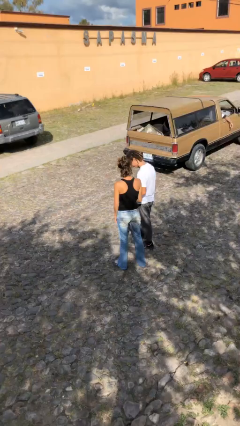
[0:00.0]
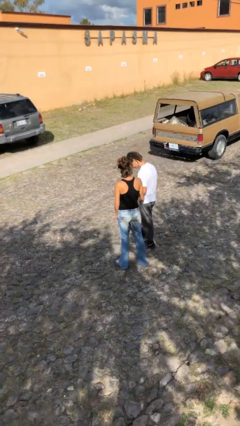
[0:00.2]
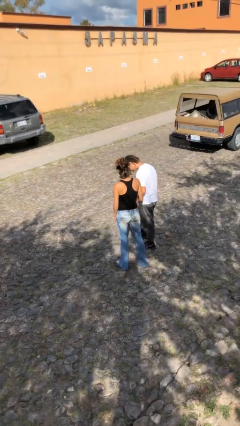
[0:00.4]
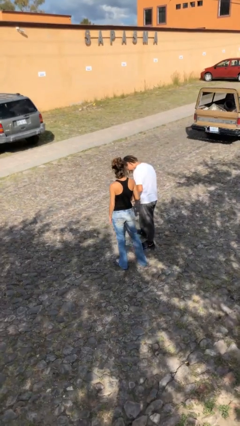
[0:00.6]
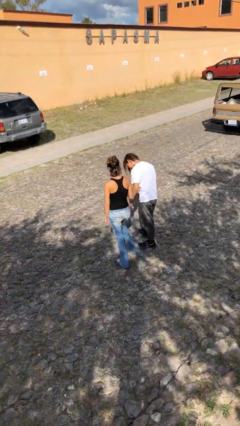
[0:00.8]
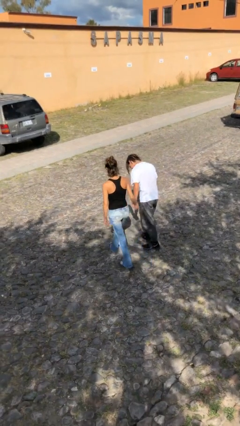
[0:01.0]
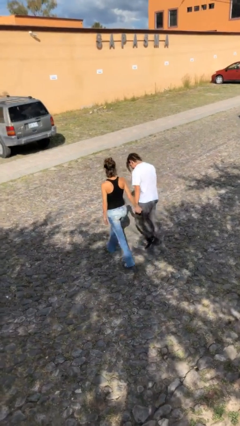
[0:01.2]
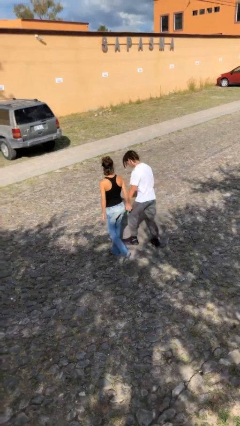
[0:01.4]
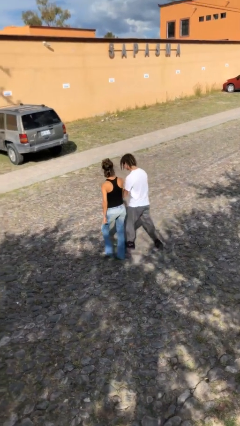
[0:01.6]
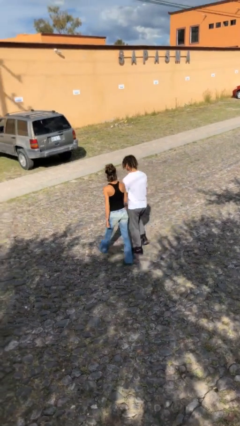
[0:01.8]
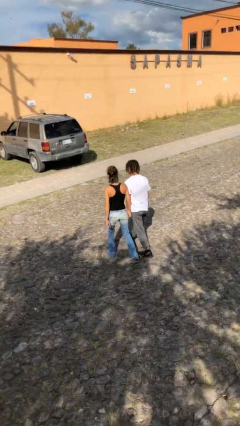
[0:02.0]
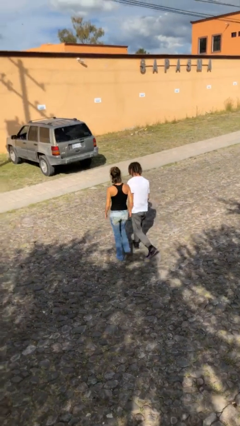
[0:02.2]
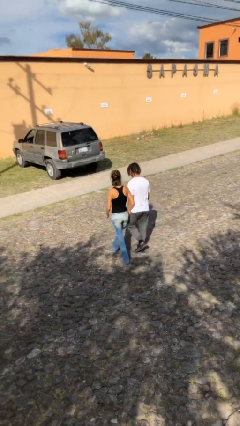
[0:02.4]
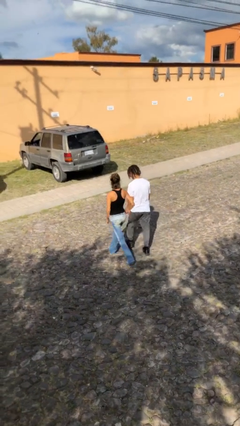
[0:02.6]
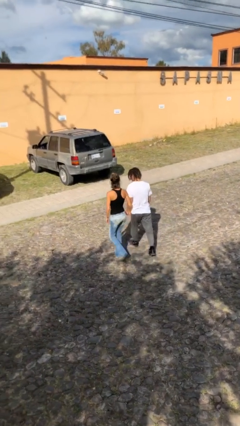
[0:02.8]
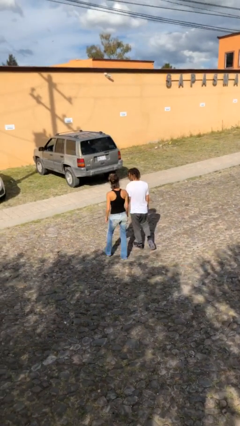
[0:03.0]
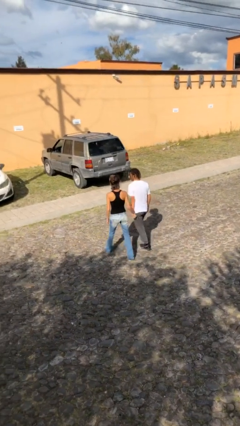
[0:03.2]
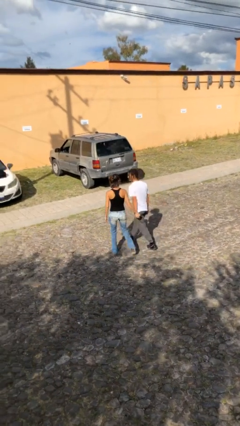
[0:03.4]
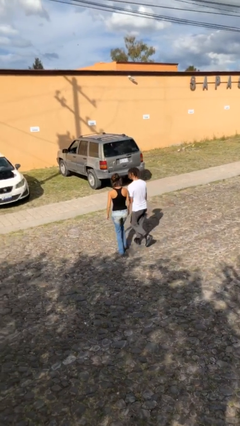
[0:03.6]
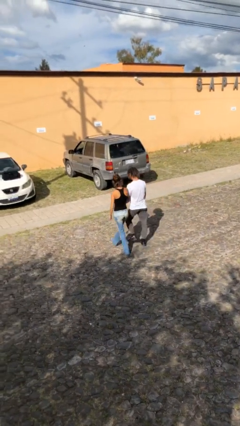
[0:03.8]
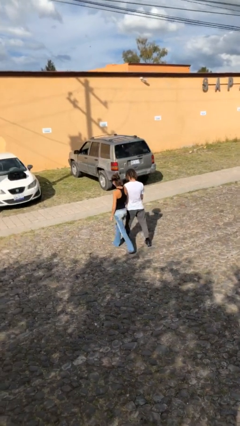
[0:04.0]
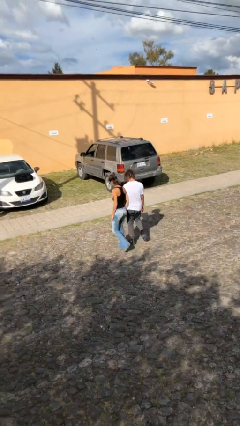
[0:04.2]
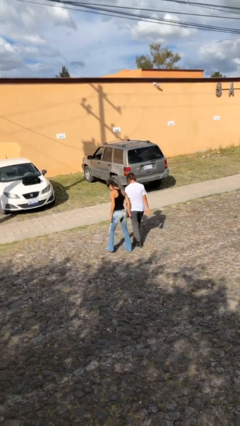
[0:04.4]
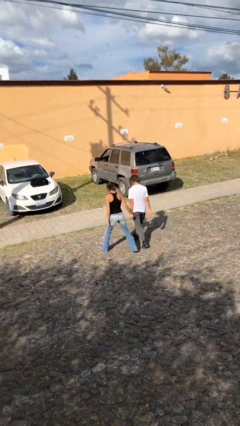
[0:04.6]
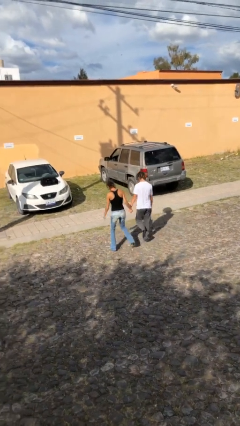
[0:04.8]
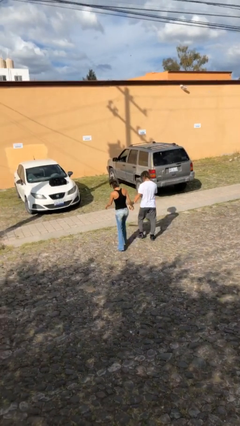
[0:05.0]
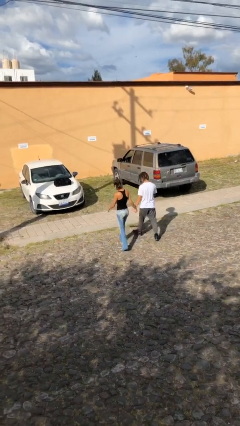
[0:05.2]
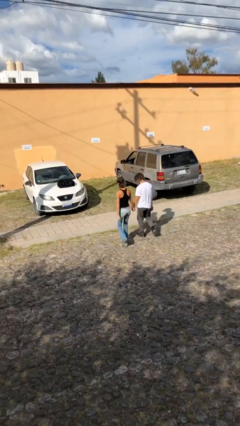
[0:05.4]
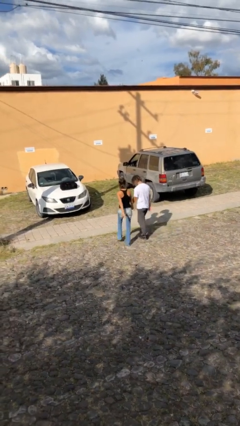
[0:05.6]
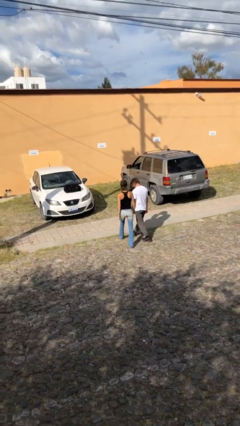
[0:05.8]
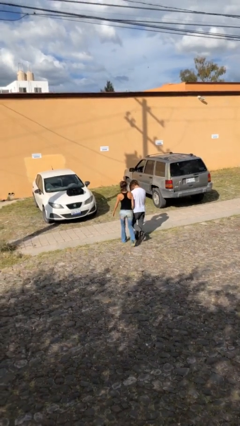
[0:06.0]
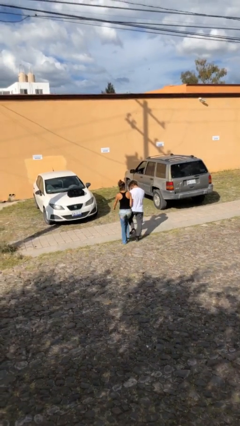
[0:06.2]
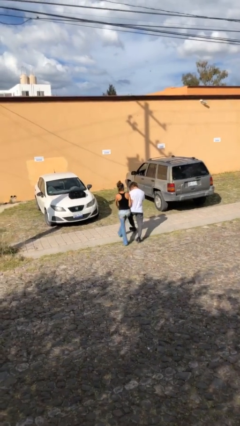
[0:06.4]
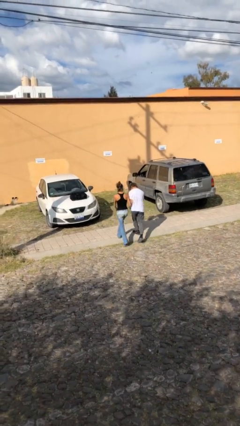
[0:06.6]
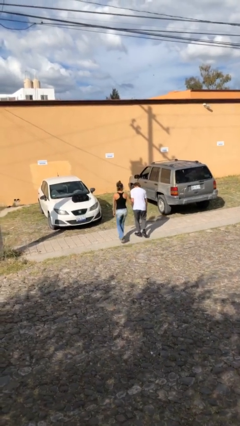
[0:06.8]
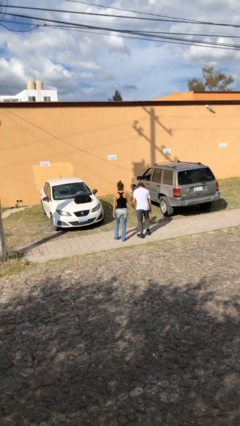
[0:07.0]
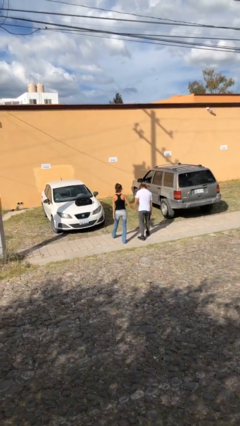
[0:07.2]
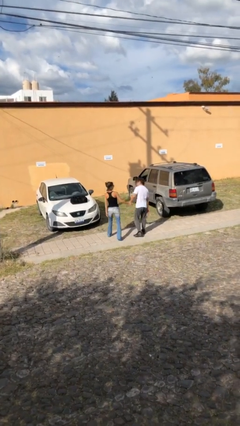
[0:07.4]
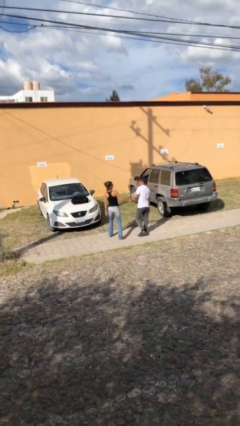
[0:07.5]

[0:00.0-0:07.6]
person holds hand

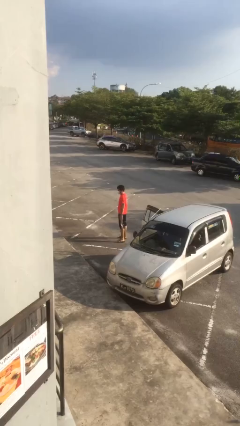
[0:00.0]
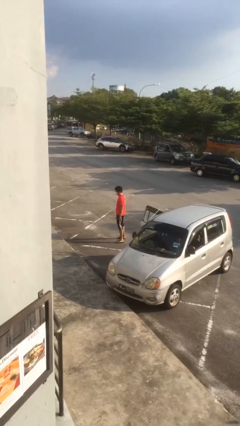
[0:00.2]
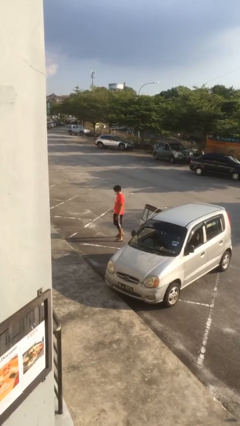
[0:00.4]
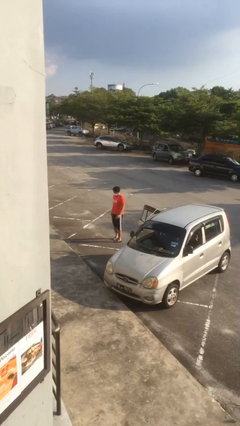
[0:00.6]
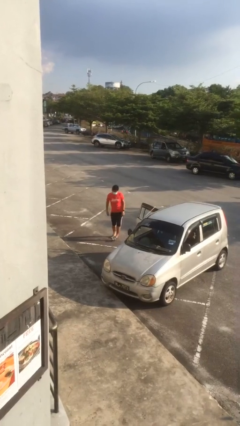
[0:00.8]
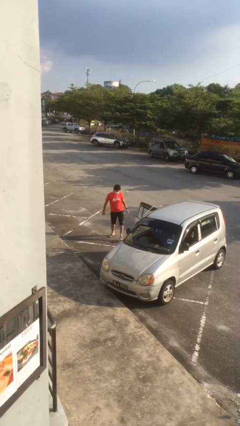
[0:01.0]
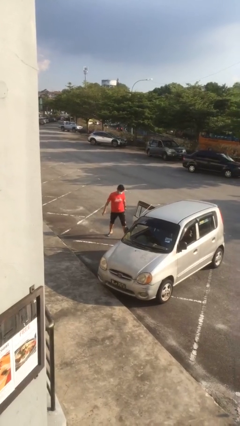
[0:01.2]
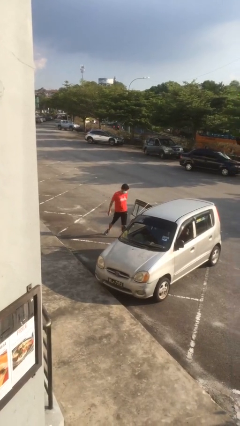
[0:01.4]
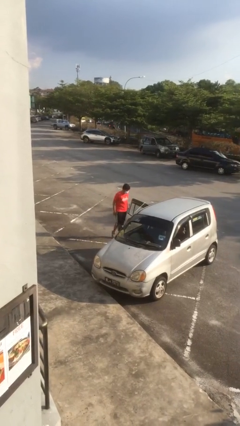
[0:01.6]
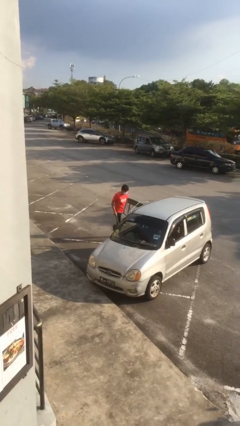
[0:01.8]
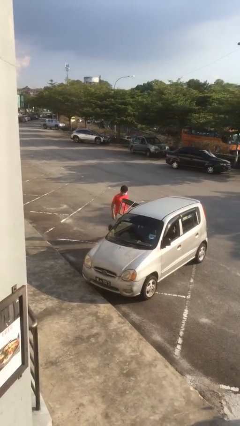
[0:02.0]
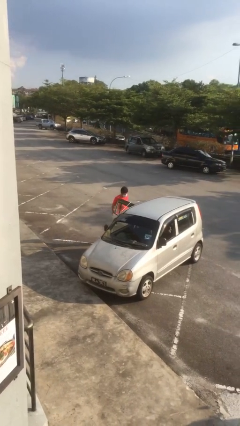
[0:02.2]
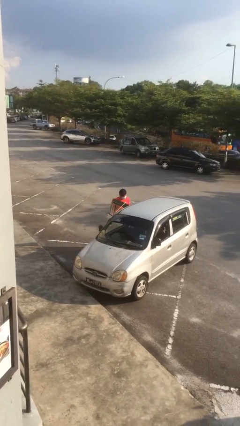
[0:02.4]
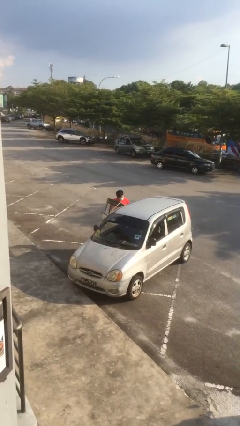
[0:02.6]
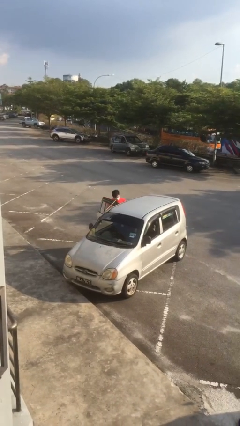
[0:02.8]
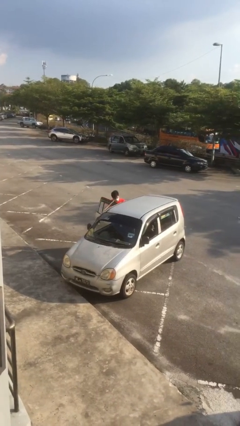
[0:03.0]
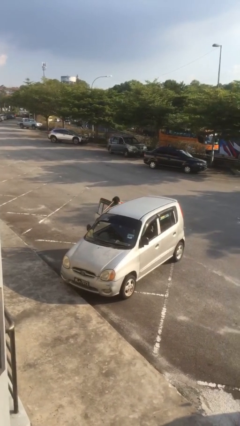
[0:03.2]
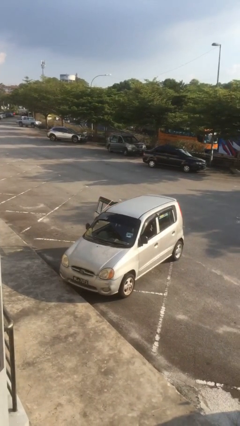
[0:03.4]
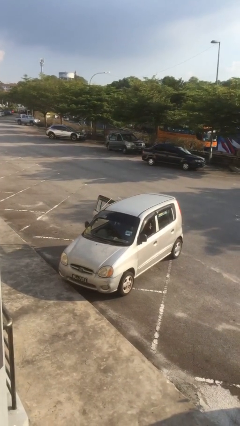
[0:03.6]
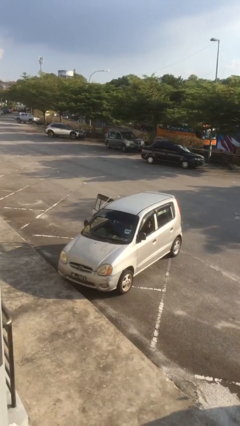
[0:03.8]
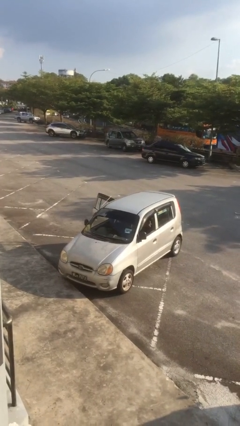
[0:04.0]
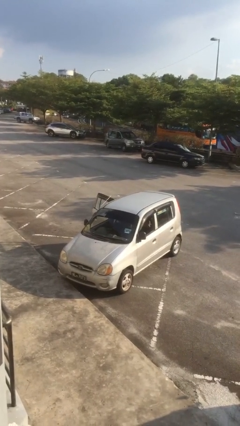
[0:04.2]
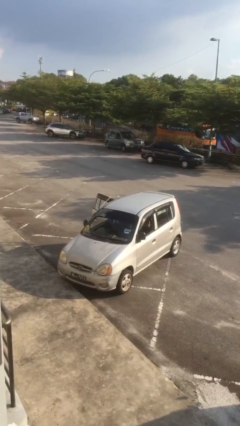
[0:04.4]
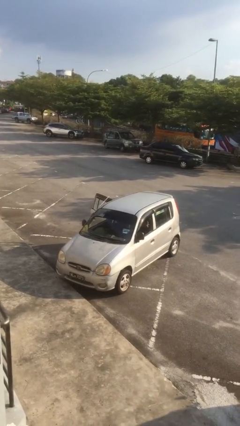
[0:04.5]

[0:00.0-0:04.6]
person enters car

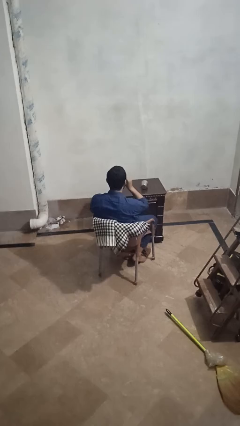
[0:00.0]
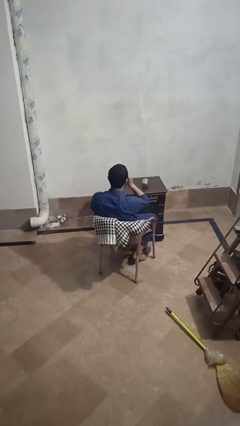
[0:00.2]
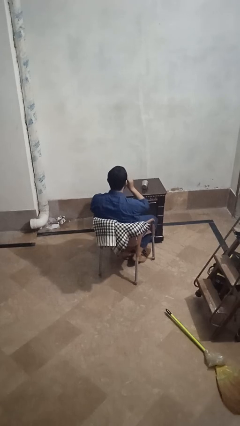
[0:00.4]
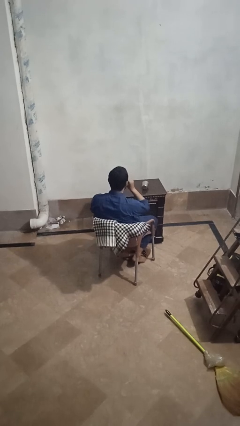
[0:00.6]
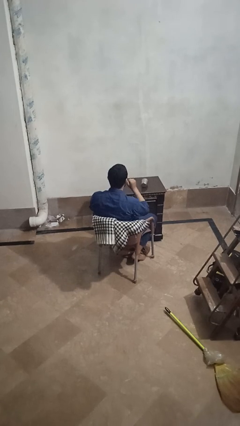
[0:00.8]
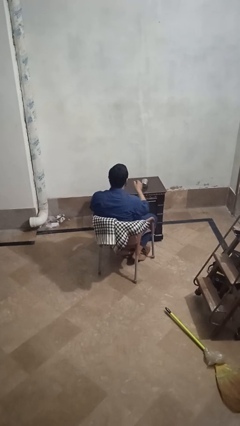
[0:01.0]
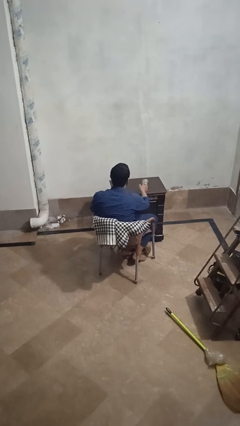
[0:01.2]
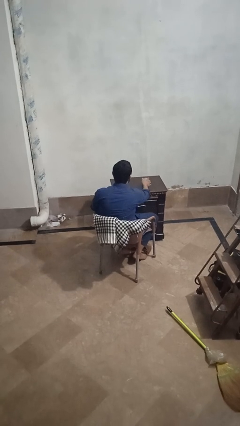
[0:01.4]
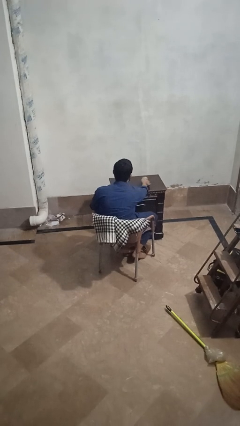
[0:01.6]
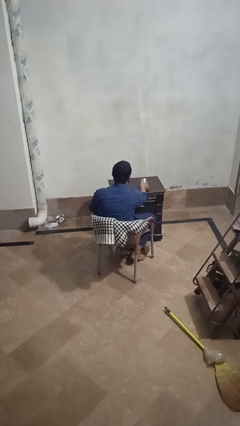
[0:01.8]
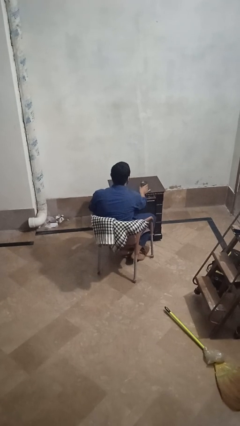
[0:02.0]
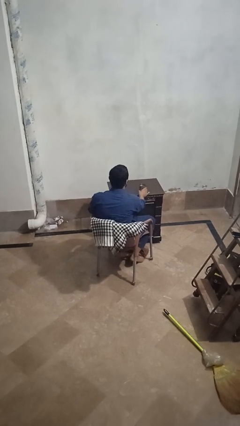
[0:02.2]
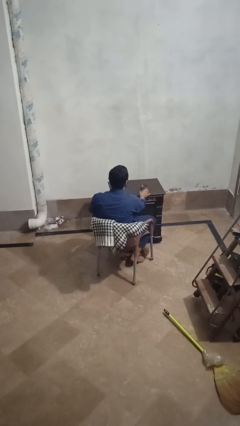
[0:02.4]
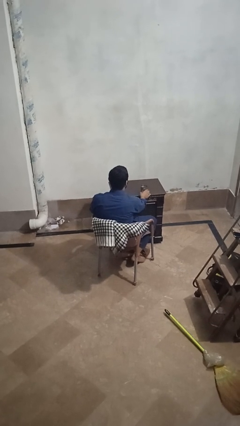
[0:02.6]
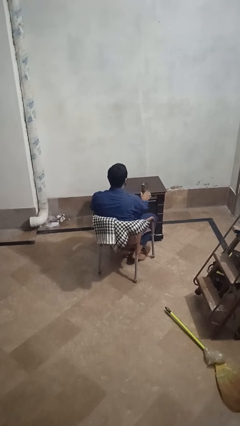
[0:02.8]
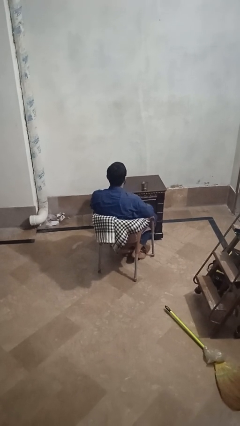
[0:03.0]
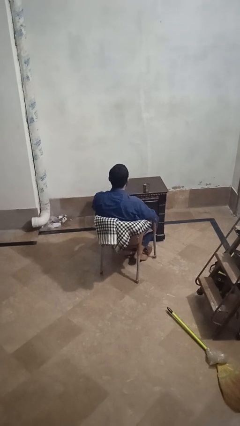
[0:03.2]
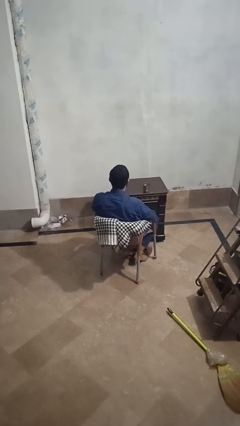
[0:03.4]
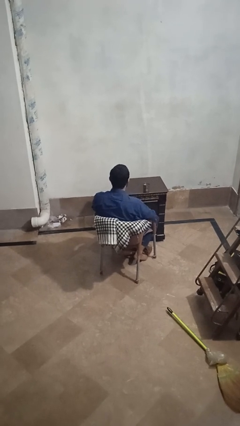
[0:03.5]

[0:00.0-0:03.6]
person sets upright glass

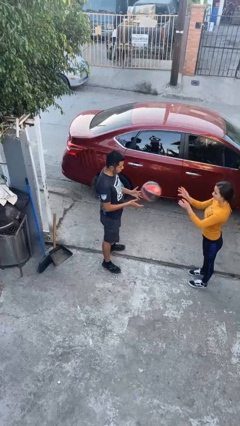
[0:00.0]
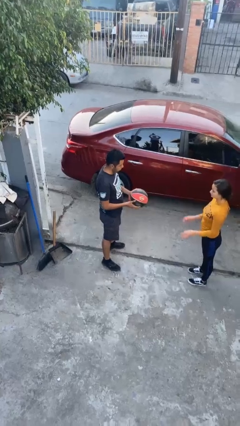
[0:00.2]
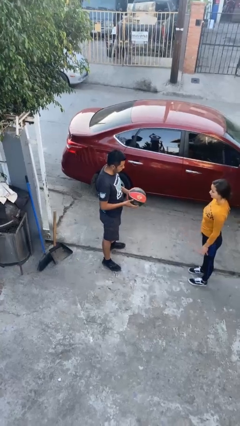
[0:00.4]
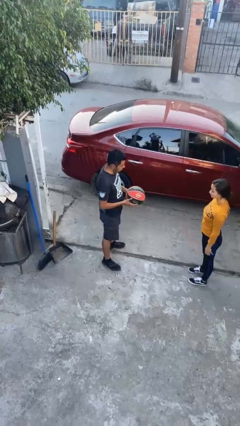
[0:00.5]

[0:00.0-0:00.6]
person catches object from person

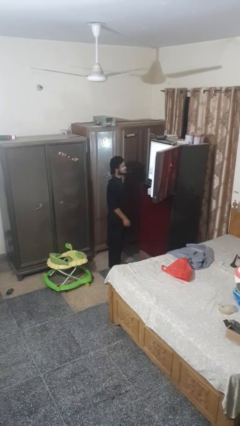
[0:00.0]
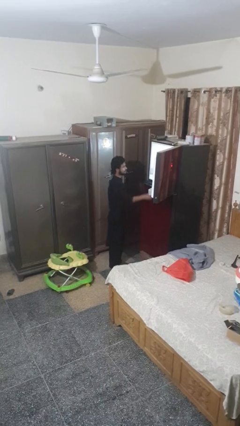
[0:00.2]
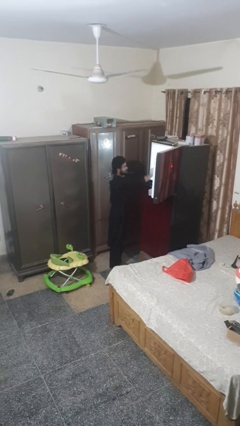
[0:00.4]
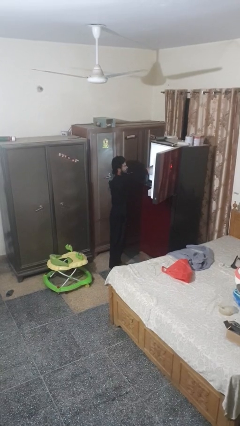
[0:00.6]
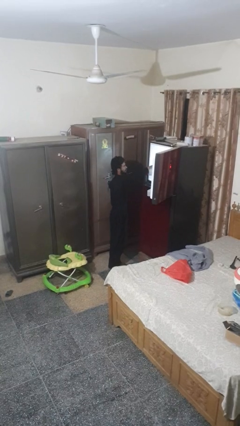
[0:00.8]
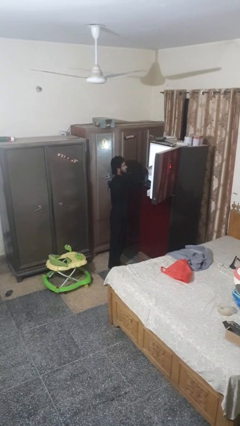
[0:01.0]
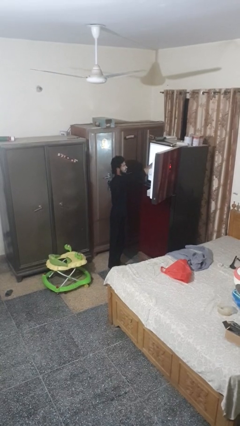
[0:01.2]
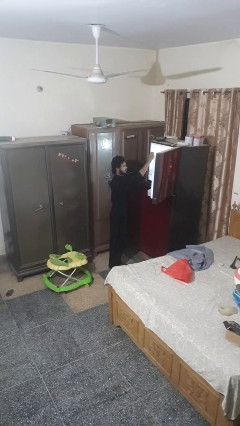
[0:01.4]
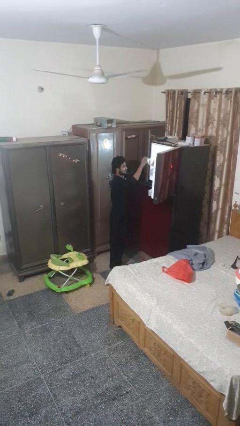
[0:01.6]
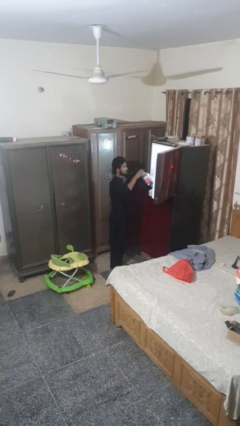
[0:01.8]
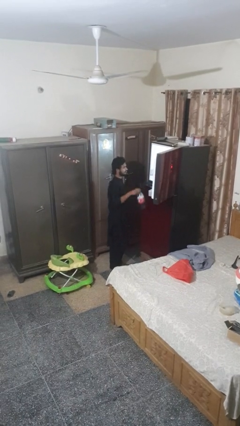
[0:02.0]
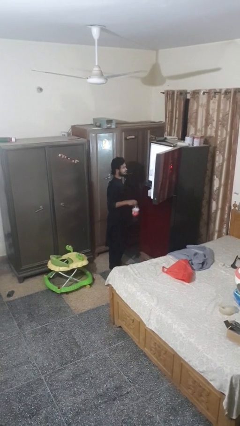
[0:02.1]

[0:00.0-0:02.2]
person takes object from refrigerator
